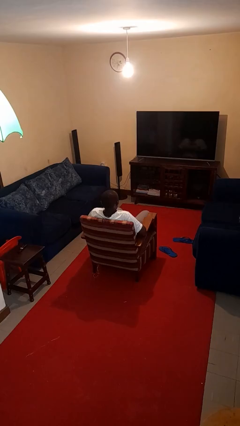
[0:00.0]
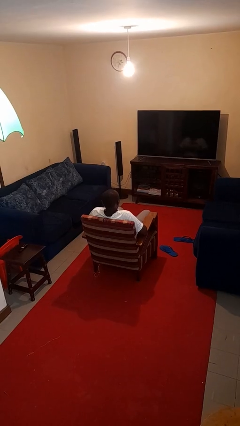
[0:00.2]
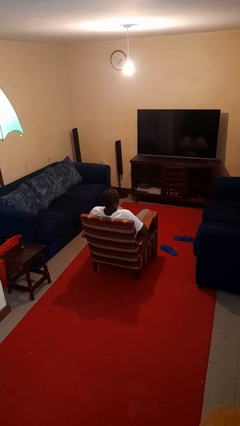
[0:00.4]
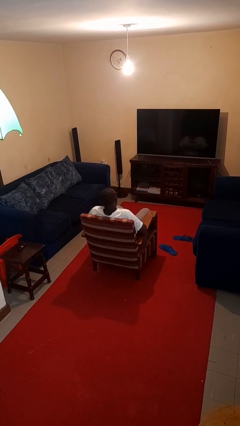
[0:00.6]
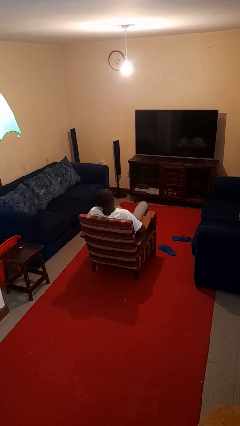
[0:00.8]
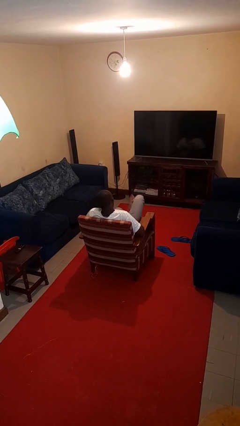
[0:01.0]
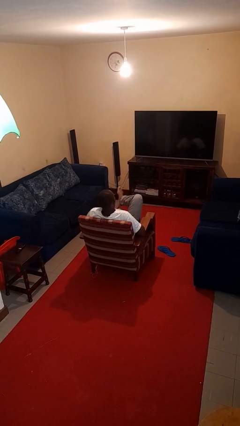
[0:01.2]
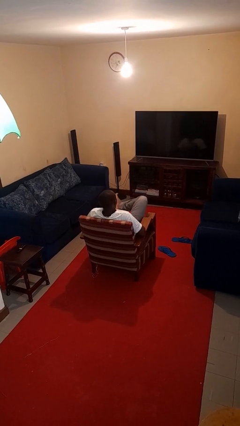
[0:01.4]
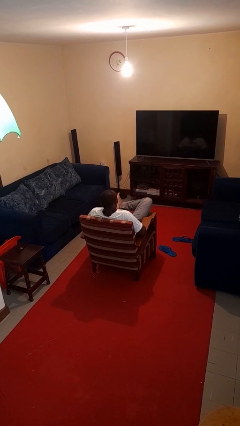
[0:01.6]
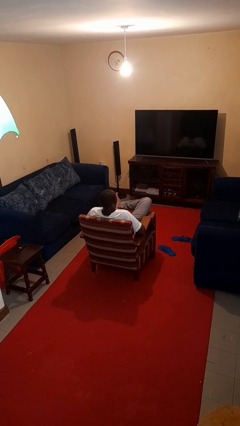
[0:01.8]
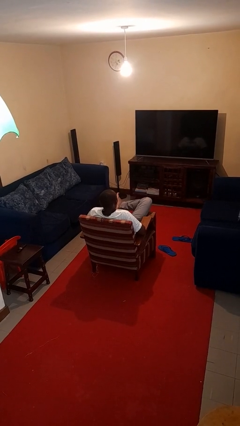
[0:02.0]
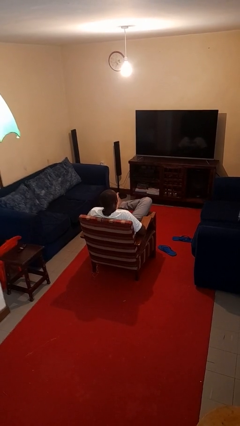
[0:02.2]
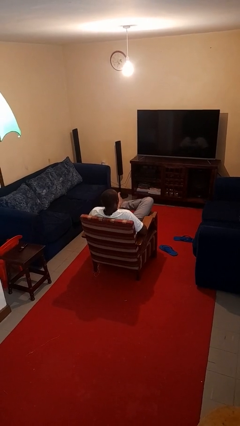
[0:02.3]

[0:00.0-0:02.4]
person crosses legs

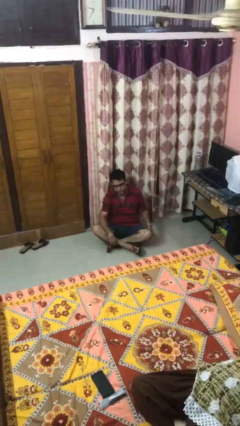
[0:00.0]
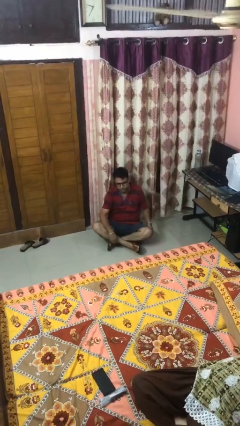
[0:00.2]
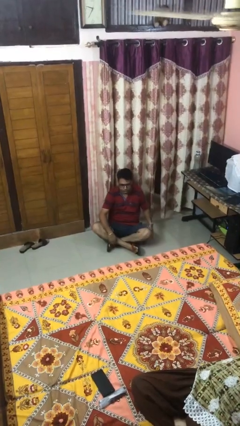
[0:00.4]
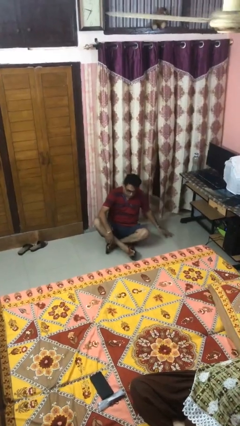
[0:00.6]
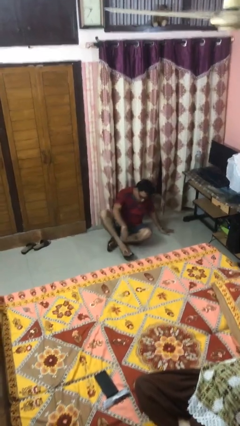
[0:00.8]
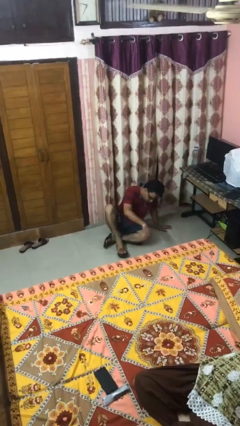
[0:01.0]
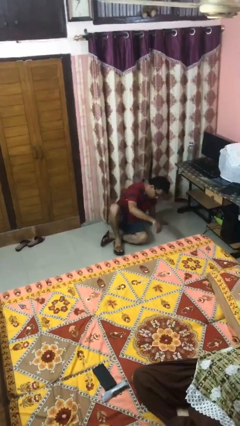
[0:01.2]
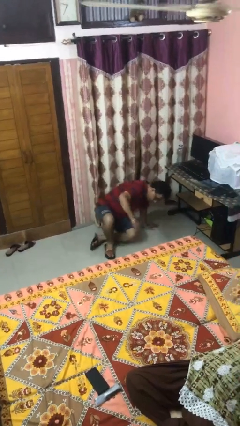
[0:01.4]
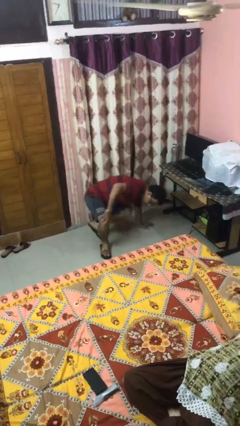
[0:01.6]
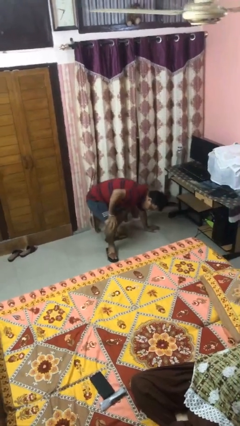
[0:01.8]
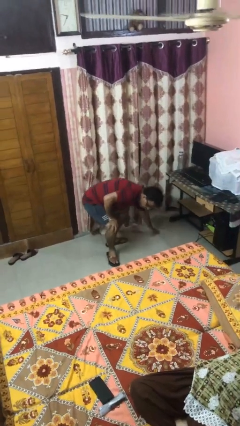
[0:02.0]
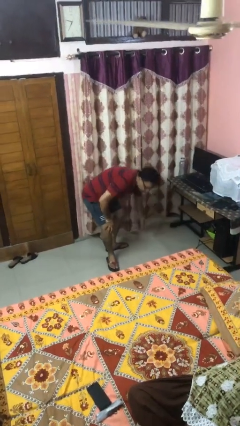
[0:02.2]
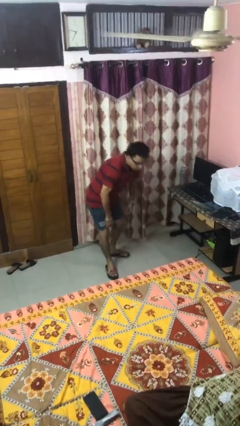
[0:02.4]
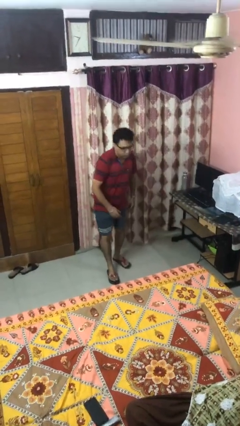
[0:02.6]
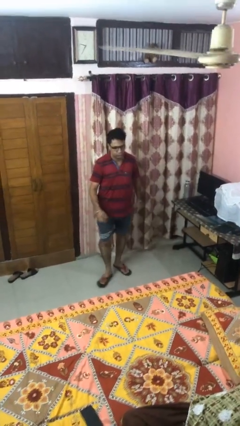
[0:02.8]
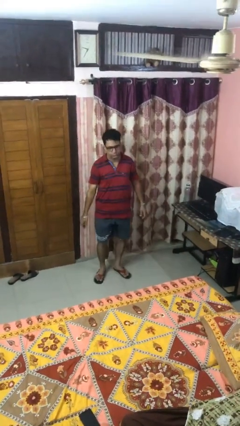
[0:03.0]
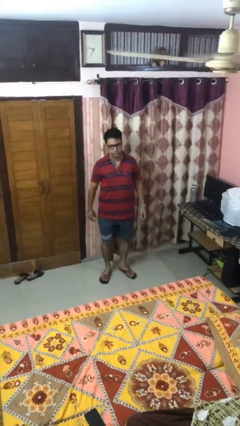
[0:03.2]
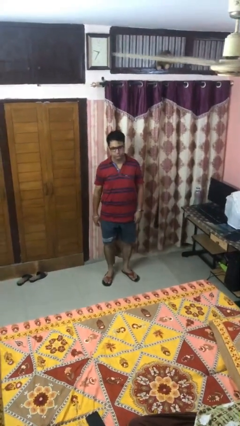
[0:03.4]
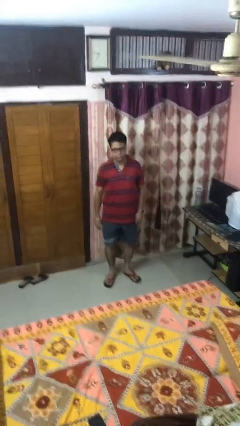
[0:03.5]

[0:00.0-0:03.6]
person stands up from floor

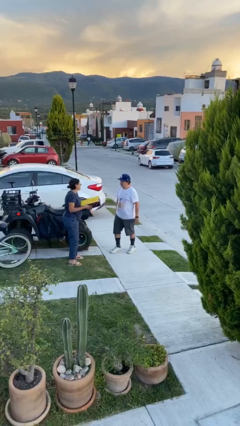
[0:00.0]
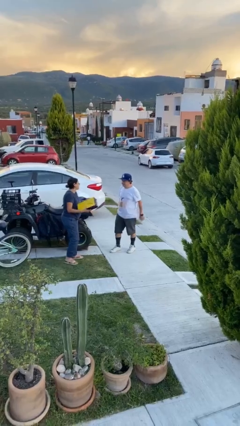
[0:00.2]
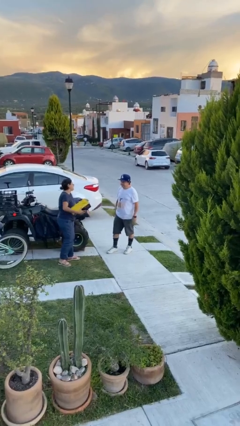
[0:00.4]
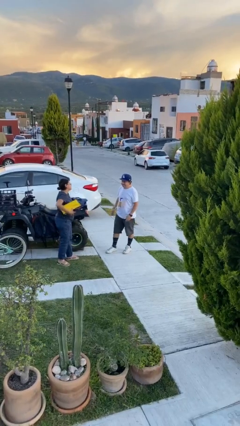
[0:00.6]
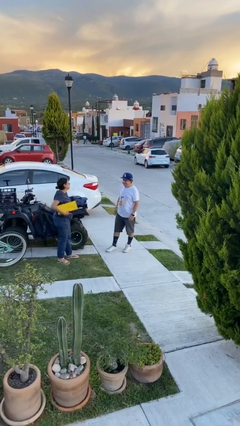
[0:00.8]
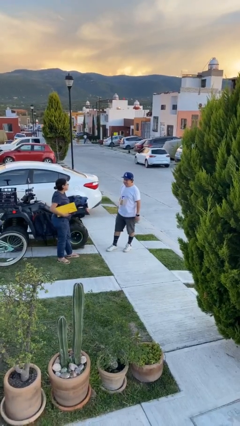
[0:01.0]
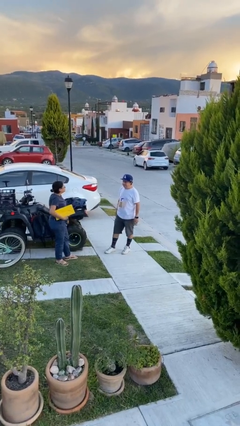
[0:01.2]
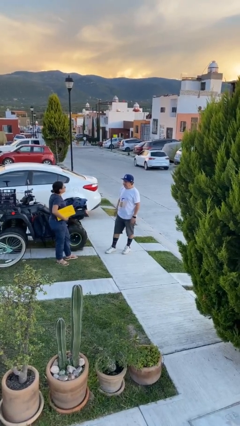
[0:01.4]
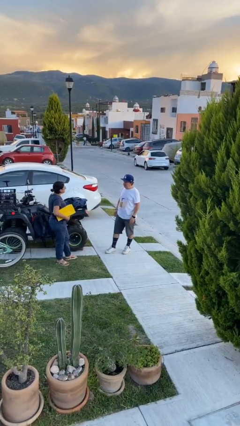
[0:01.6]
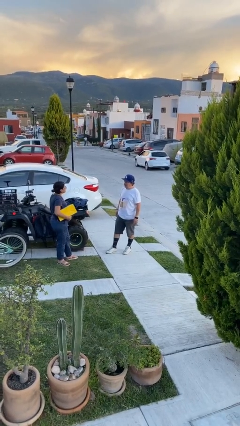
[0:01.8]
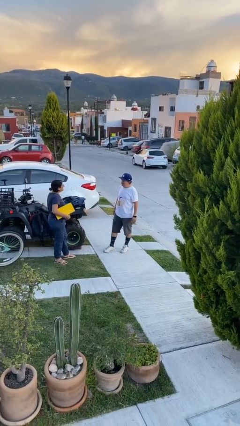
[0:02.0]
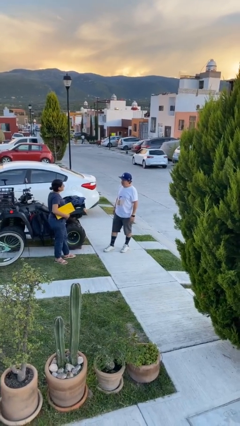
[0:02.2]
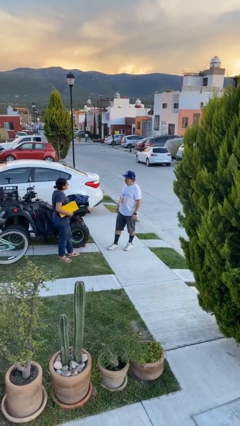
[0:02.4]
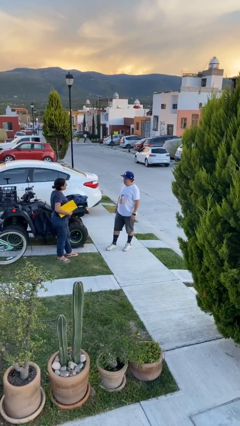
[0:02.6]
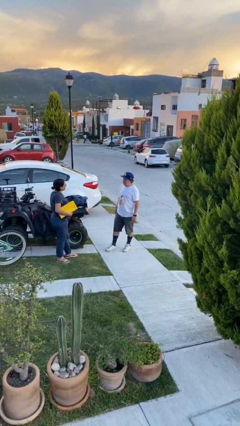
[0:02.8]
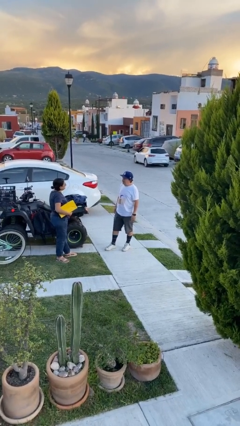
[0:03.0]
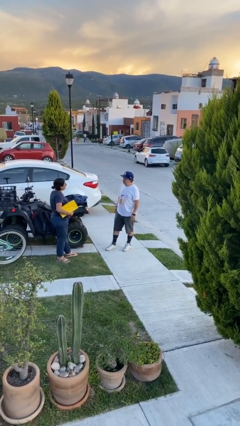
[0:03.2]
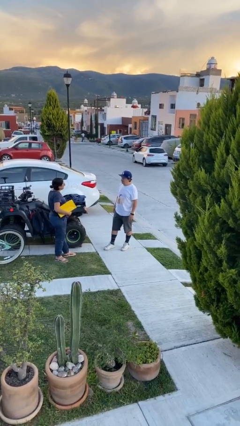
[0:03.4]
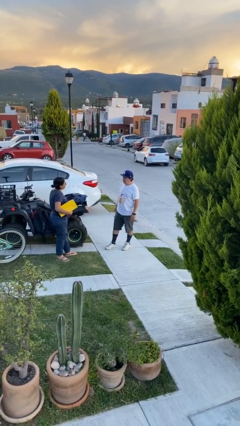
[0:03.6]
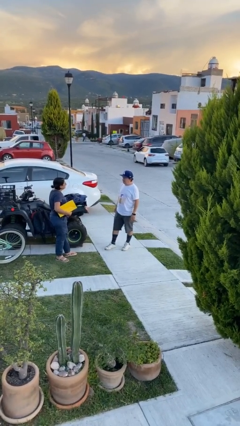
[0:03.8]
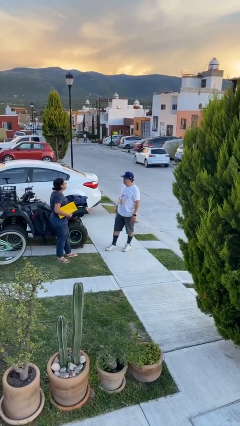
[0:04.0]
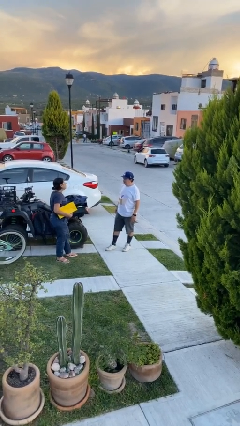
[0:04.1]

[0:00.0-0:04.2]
person talks to person

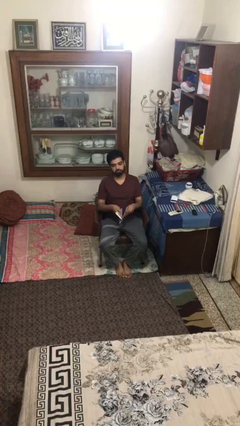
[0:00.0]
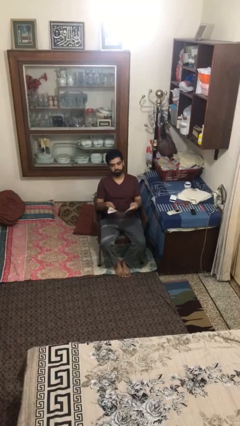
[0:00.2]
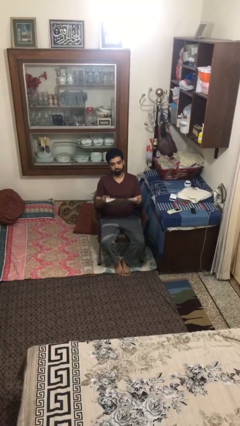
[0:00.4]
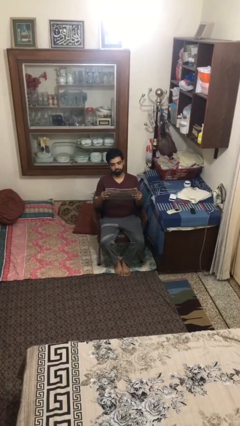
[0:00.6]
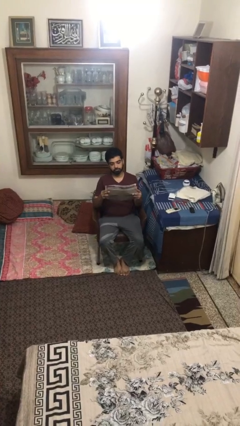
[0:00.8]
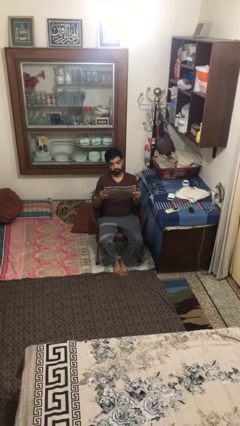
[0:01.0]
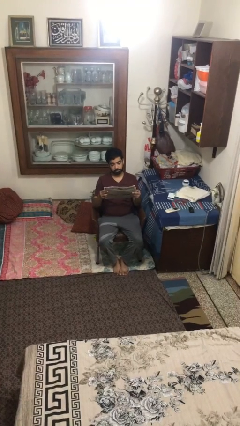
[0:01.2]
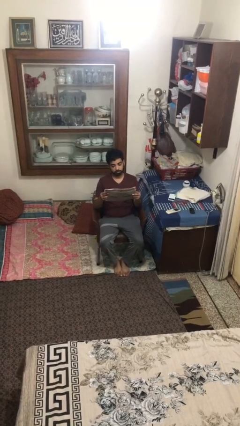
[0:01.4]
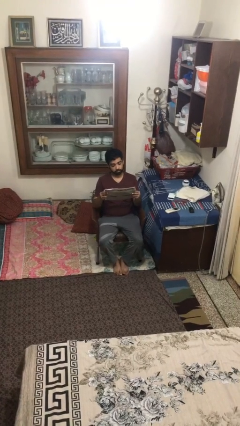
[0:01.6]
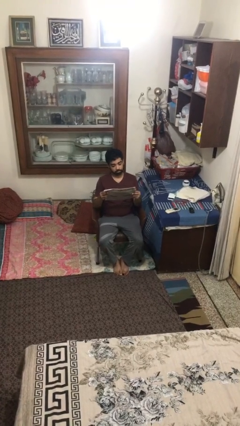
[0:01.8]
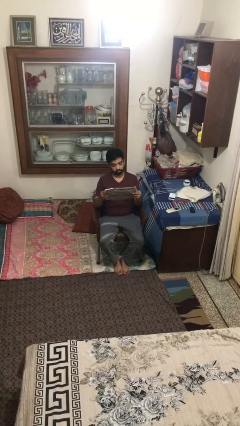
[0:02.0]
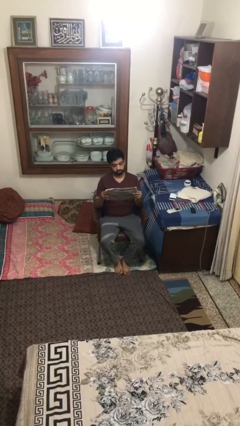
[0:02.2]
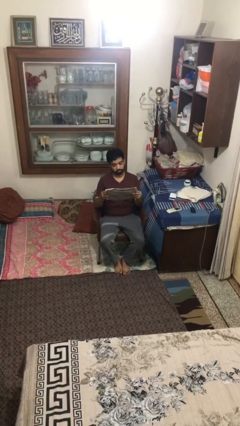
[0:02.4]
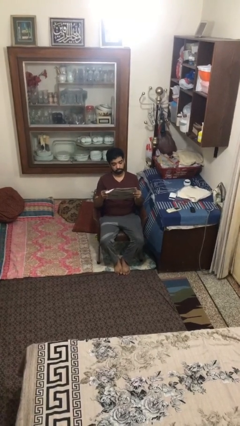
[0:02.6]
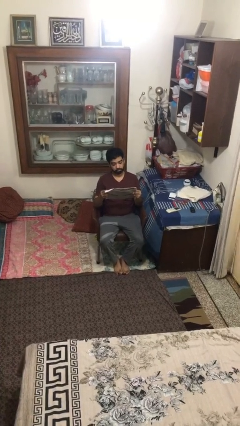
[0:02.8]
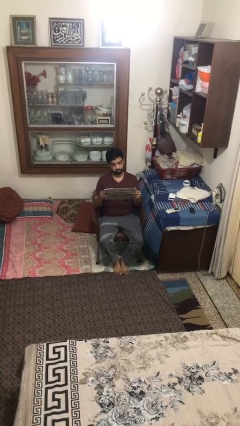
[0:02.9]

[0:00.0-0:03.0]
person reads document

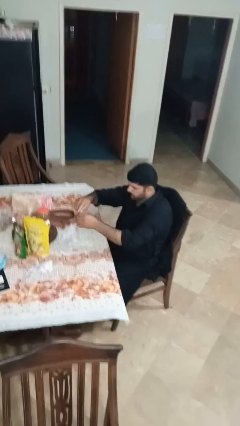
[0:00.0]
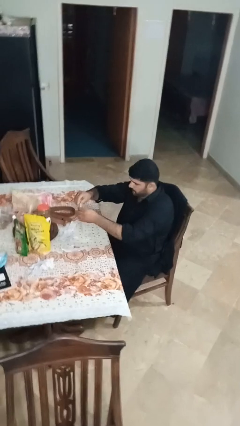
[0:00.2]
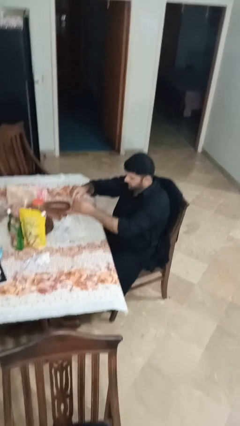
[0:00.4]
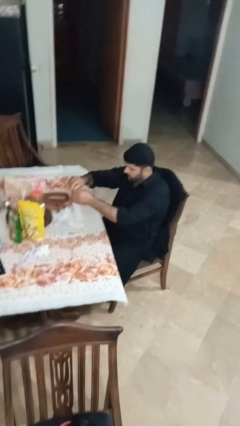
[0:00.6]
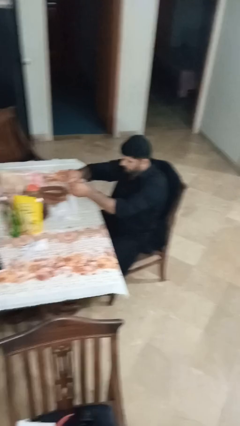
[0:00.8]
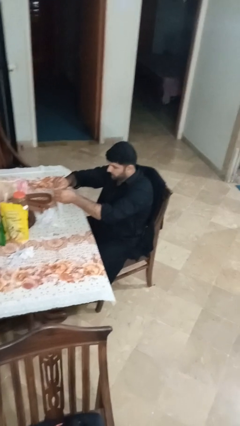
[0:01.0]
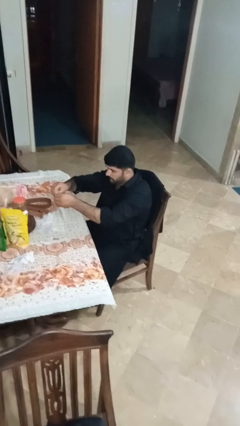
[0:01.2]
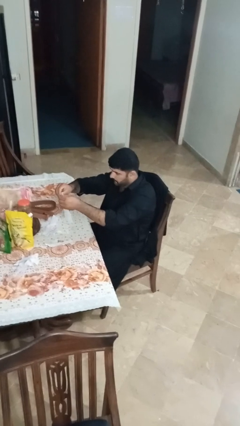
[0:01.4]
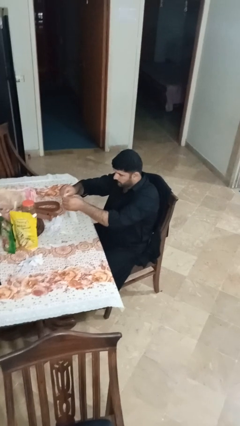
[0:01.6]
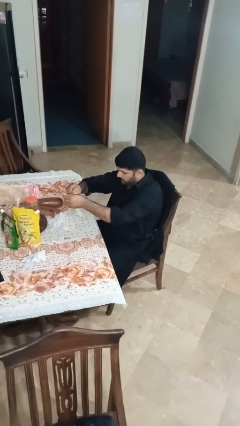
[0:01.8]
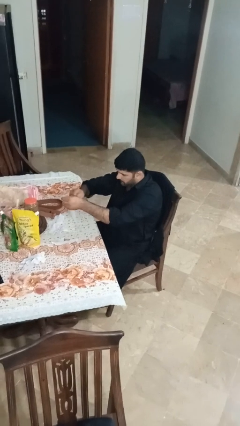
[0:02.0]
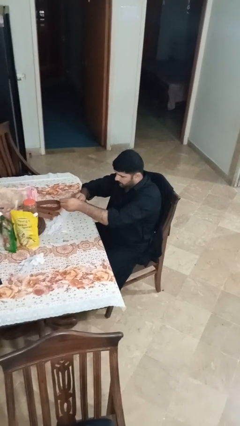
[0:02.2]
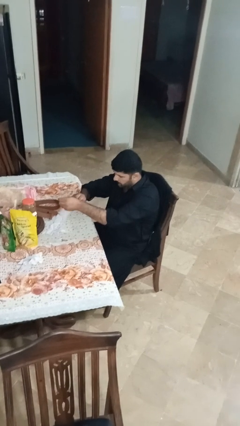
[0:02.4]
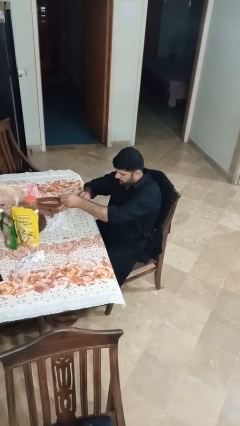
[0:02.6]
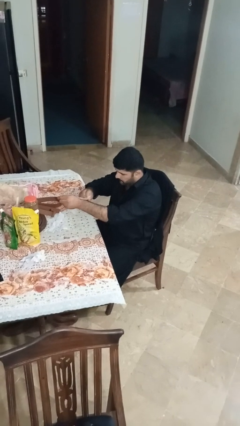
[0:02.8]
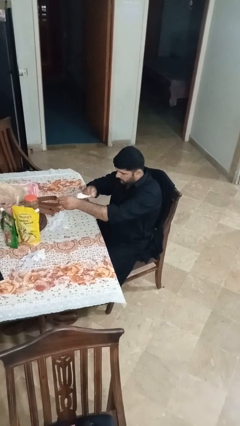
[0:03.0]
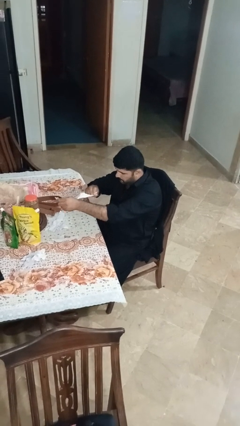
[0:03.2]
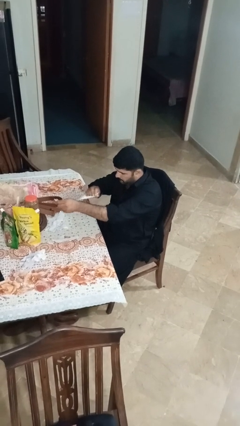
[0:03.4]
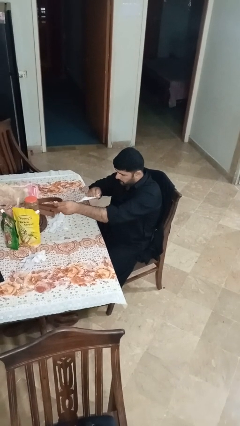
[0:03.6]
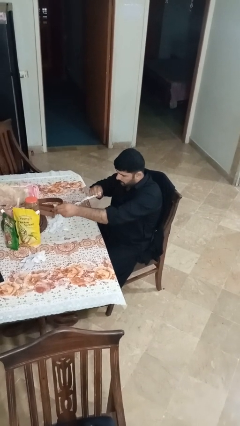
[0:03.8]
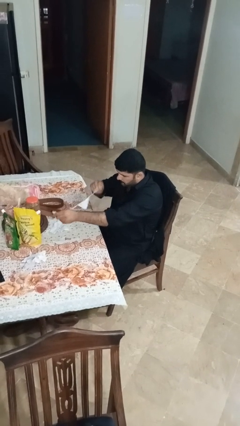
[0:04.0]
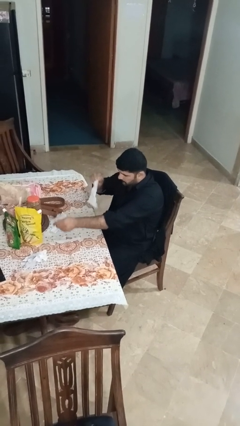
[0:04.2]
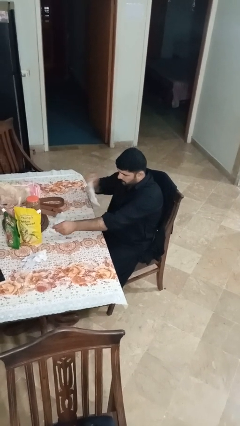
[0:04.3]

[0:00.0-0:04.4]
person tears paper
